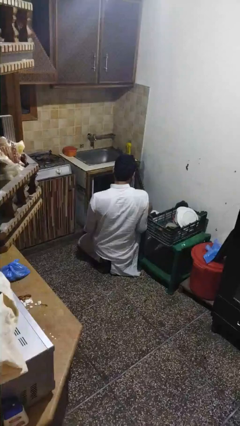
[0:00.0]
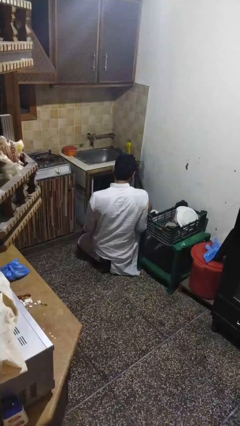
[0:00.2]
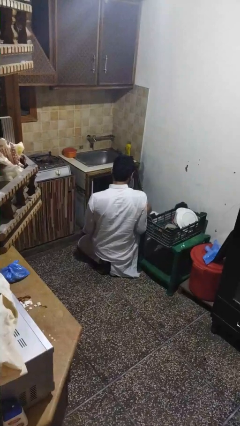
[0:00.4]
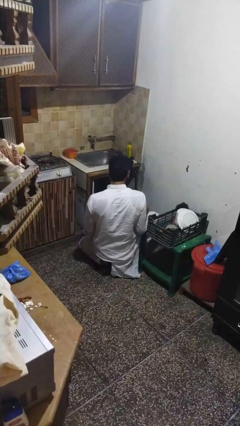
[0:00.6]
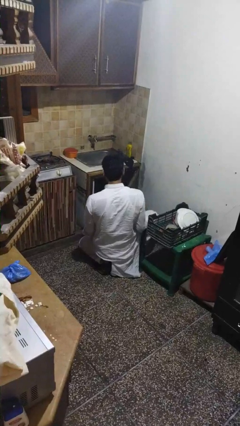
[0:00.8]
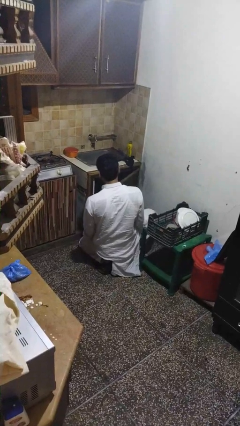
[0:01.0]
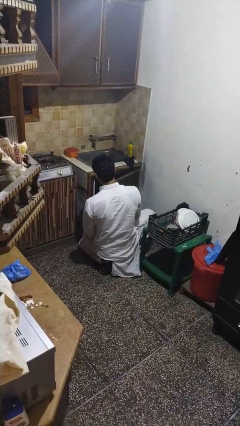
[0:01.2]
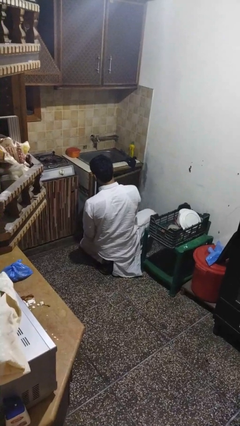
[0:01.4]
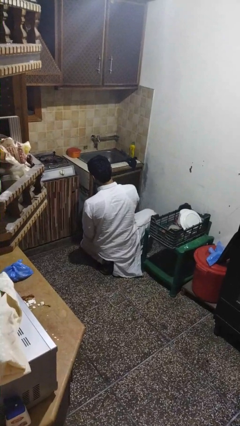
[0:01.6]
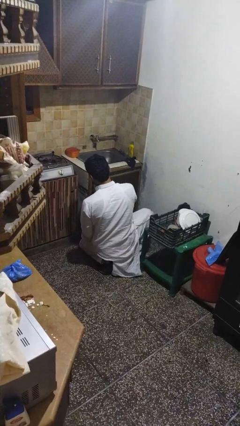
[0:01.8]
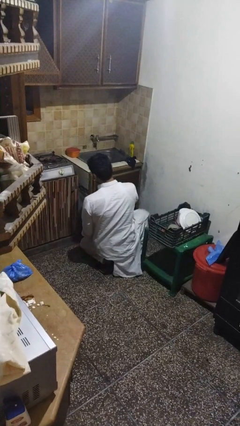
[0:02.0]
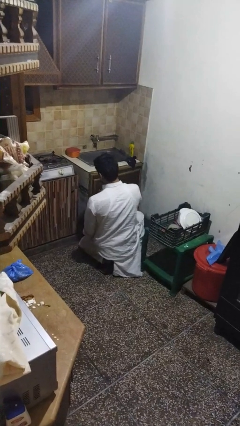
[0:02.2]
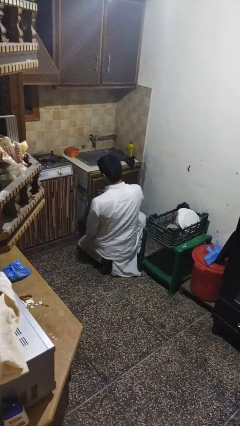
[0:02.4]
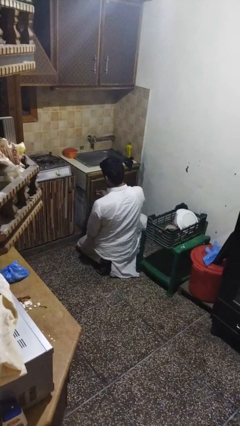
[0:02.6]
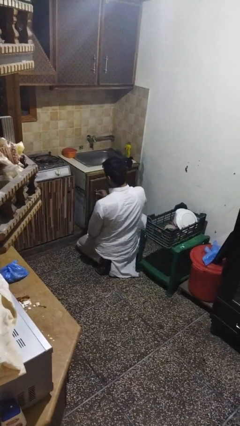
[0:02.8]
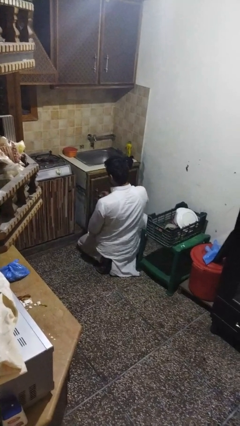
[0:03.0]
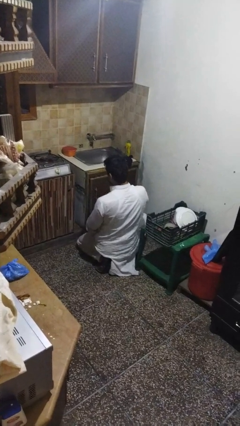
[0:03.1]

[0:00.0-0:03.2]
person closes cabinet

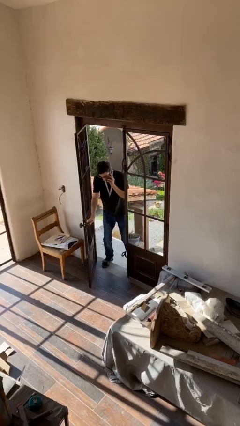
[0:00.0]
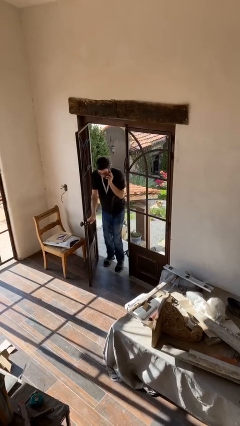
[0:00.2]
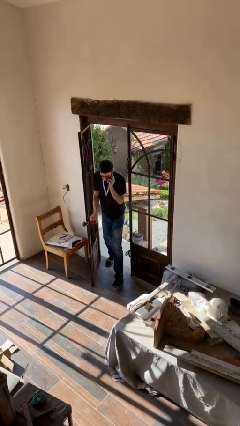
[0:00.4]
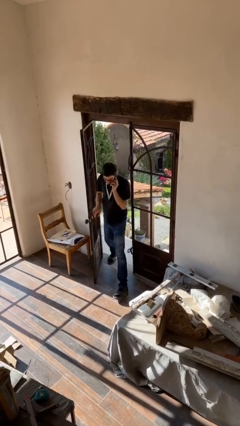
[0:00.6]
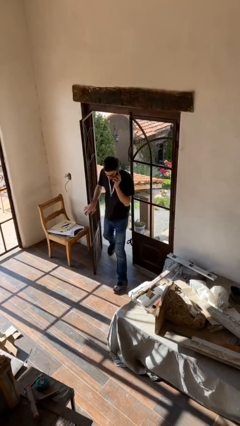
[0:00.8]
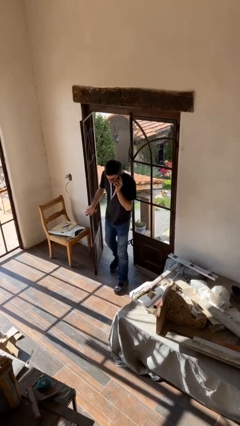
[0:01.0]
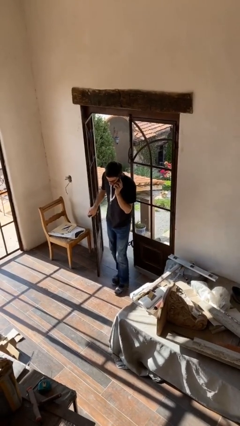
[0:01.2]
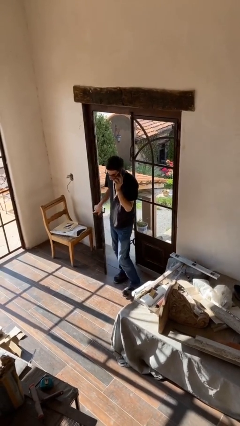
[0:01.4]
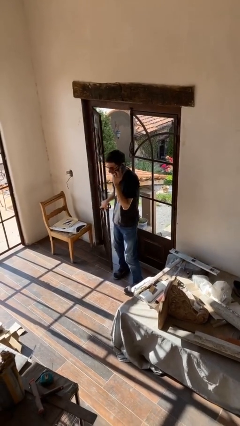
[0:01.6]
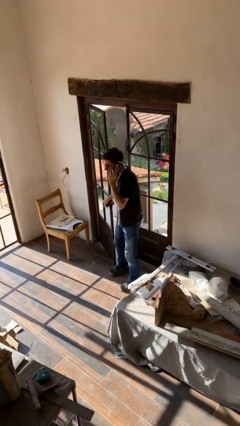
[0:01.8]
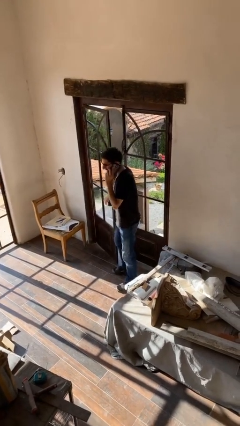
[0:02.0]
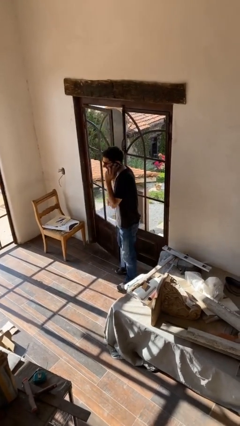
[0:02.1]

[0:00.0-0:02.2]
person enters scene through structure

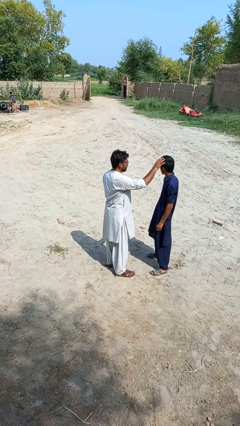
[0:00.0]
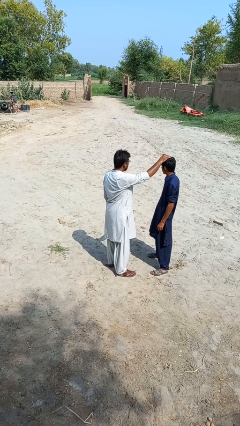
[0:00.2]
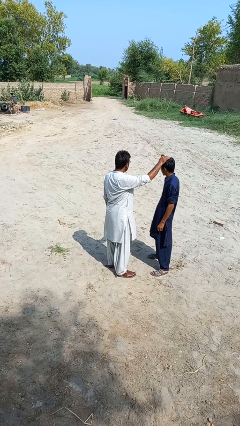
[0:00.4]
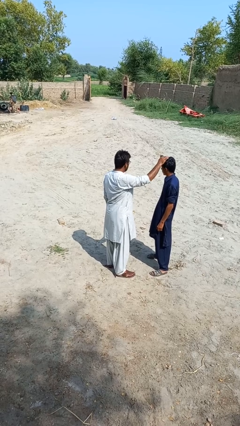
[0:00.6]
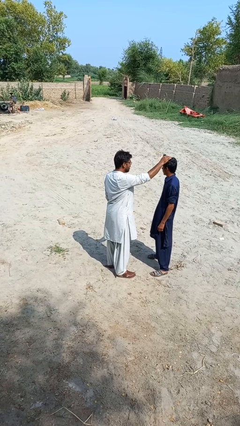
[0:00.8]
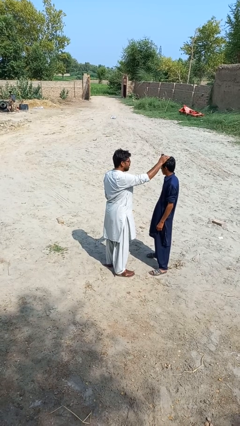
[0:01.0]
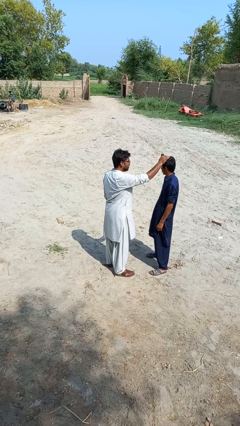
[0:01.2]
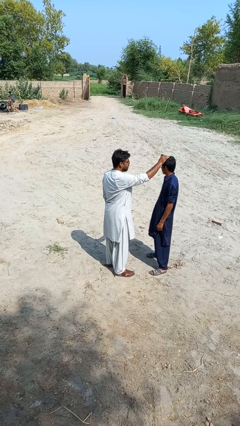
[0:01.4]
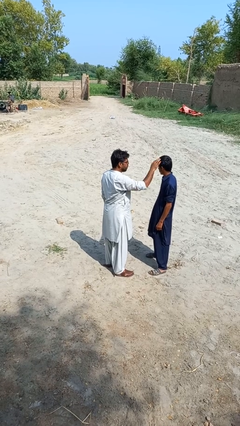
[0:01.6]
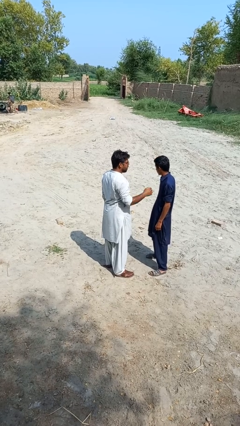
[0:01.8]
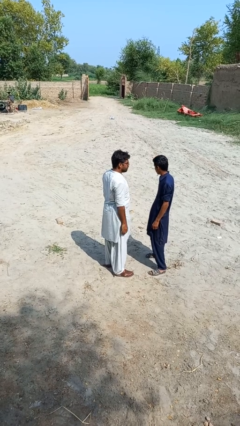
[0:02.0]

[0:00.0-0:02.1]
person grabs person by hair

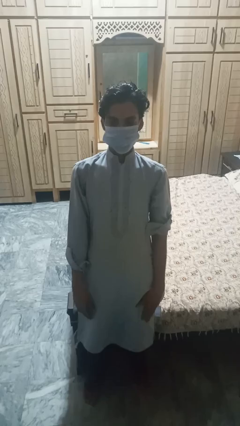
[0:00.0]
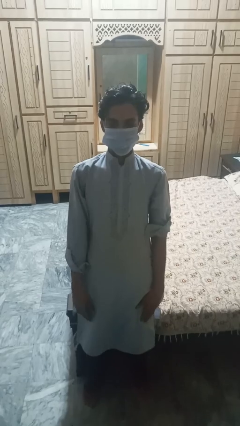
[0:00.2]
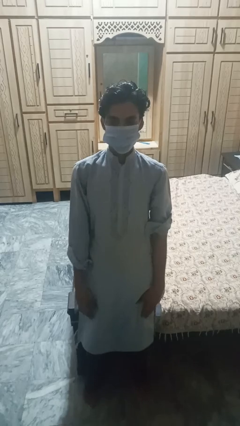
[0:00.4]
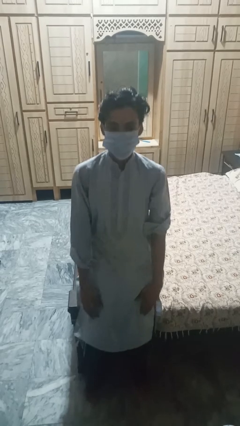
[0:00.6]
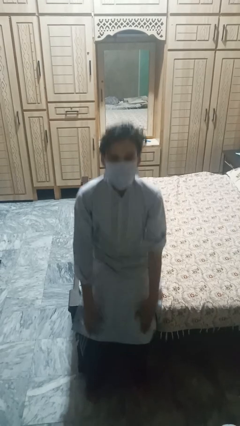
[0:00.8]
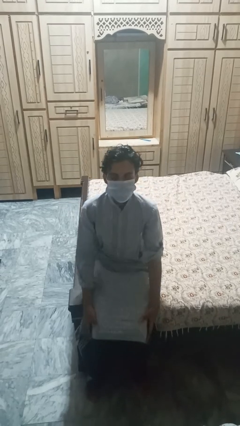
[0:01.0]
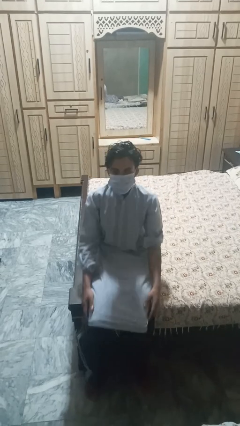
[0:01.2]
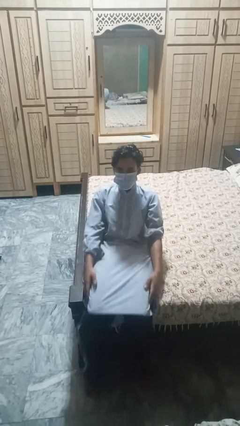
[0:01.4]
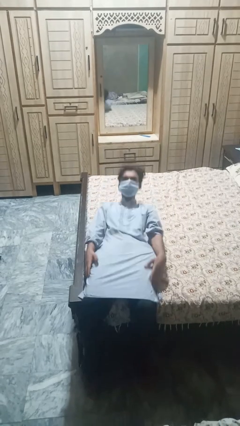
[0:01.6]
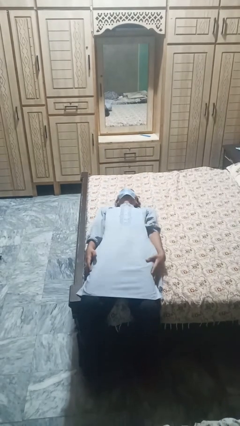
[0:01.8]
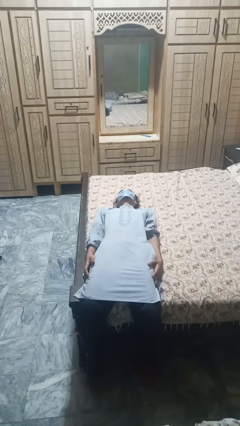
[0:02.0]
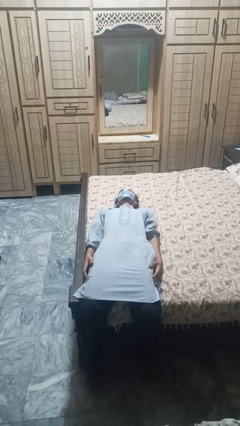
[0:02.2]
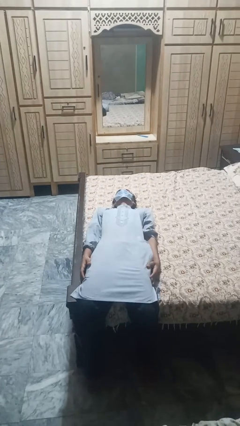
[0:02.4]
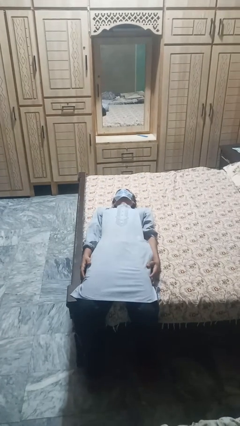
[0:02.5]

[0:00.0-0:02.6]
person lies down on bed

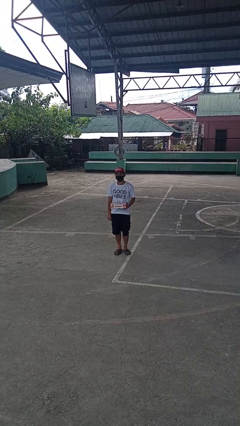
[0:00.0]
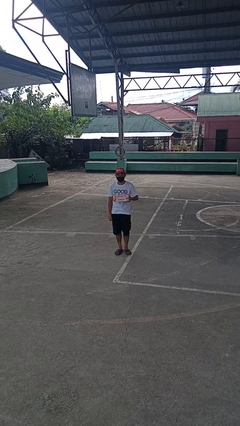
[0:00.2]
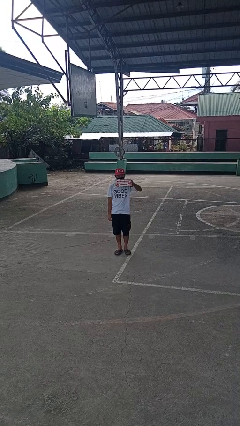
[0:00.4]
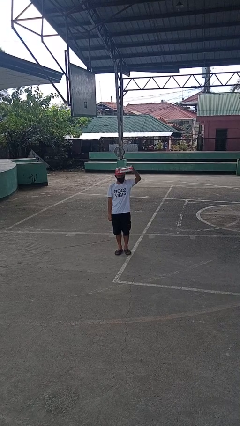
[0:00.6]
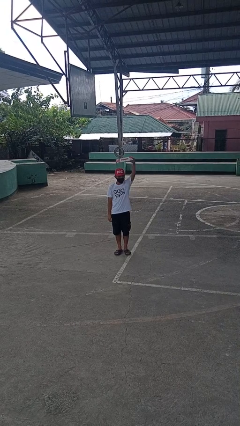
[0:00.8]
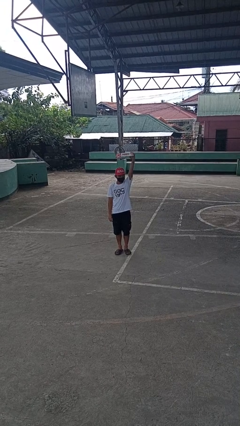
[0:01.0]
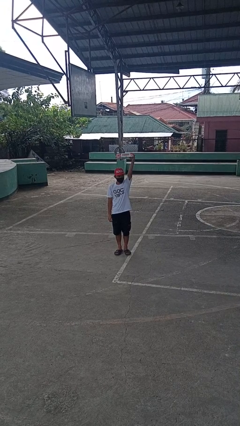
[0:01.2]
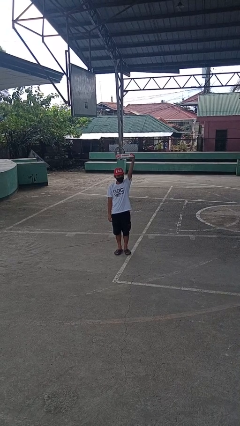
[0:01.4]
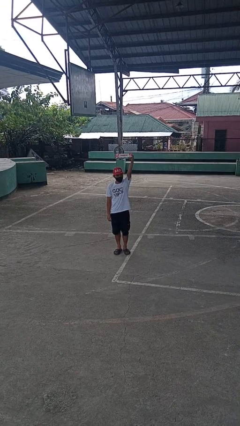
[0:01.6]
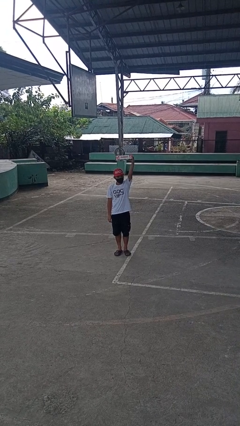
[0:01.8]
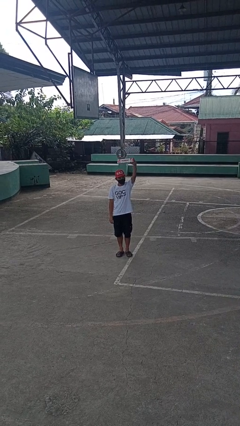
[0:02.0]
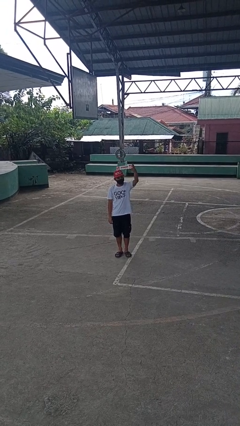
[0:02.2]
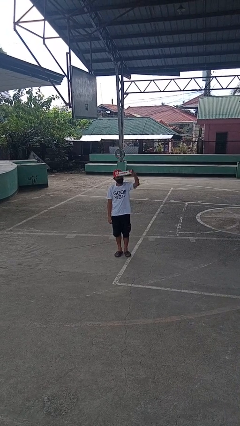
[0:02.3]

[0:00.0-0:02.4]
person holds object above head

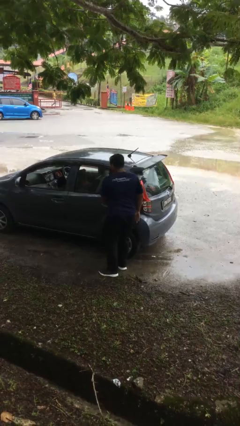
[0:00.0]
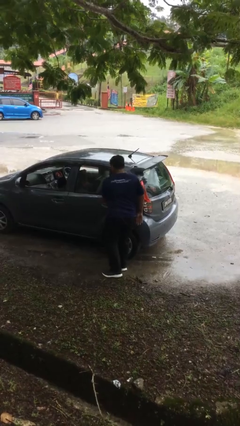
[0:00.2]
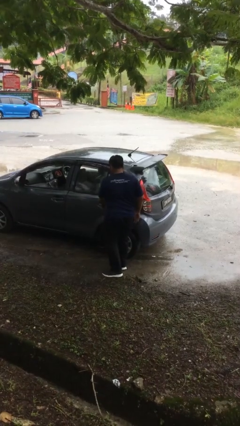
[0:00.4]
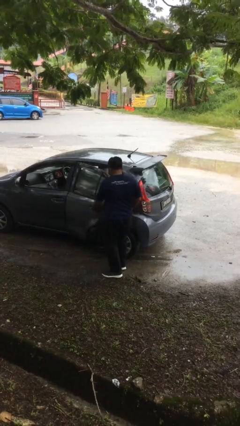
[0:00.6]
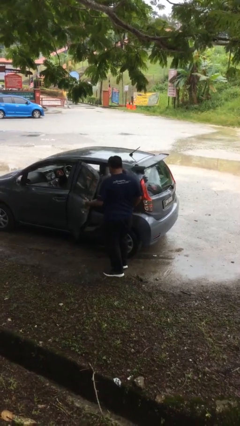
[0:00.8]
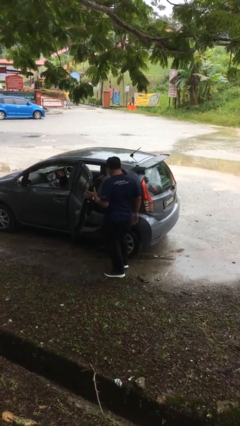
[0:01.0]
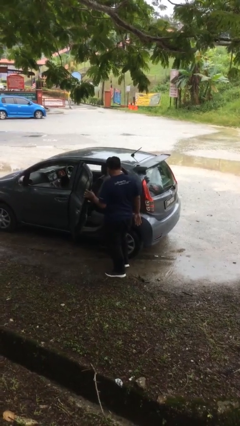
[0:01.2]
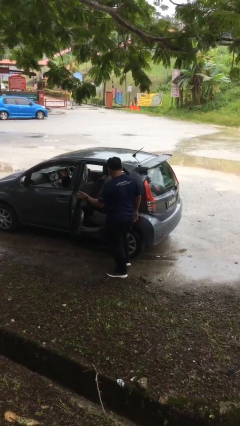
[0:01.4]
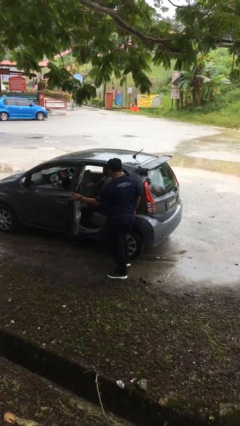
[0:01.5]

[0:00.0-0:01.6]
person opens car door

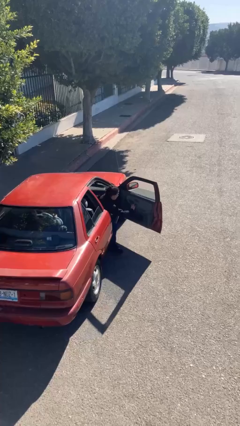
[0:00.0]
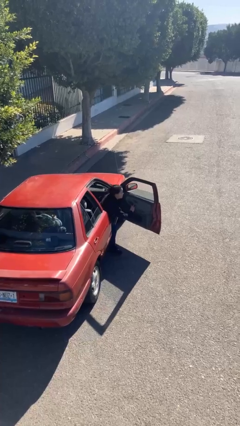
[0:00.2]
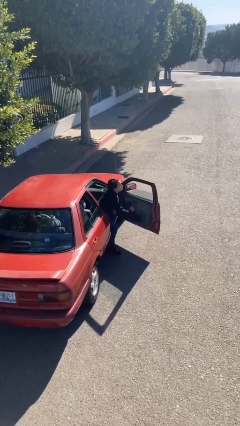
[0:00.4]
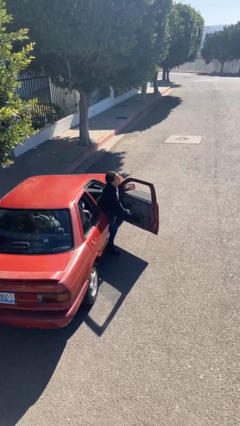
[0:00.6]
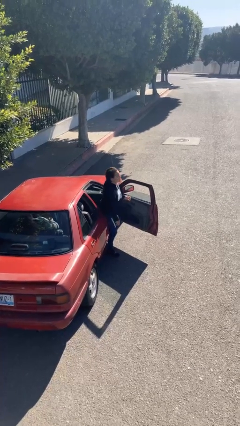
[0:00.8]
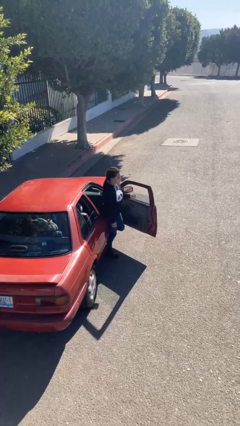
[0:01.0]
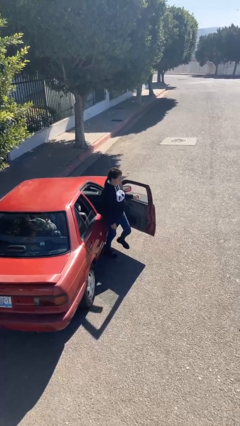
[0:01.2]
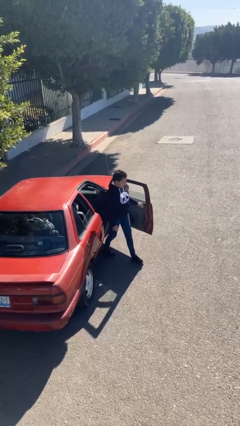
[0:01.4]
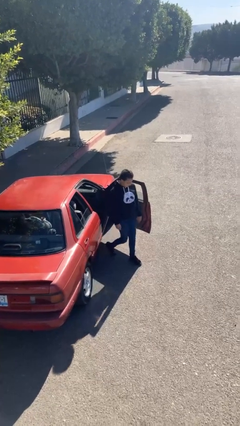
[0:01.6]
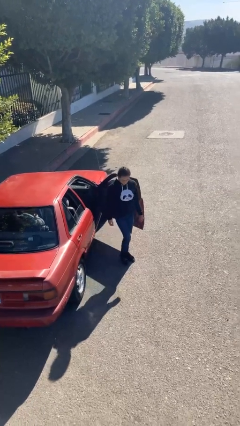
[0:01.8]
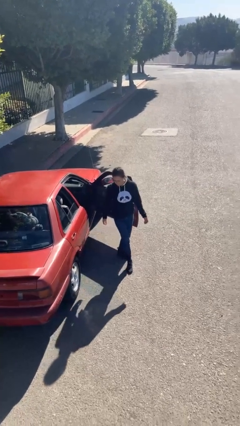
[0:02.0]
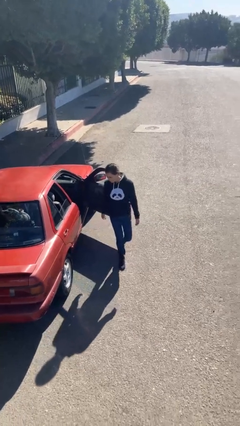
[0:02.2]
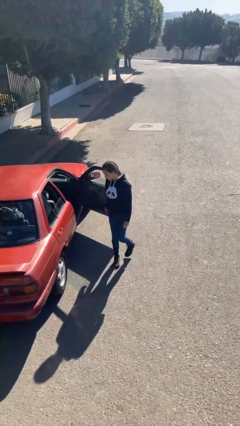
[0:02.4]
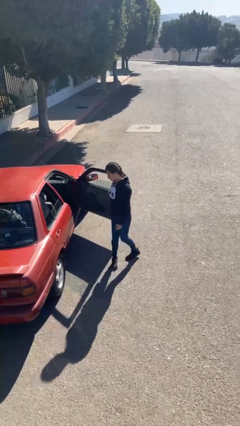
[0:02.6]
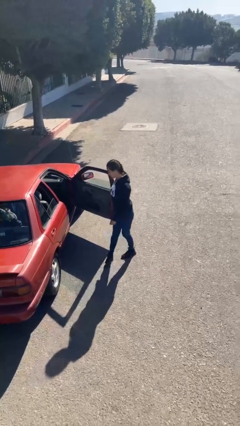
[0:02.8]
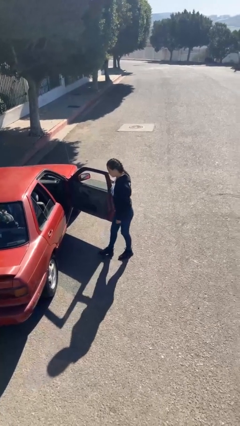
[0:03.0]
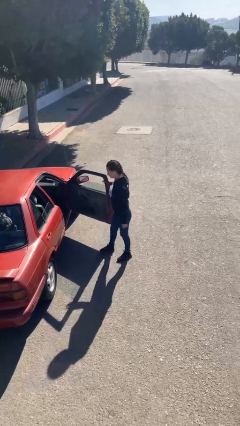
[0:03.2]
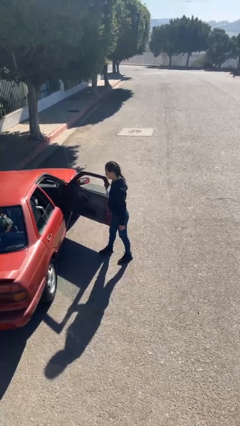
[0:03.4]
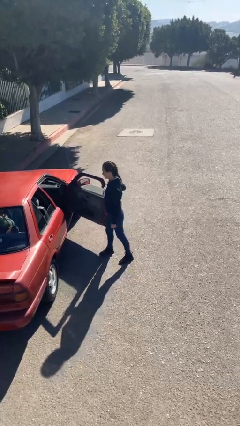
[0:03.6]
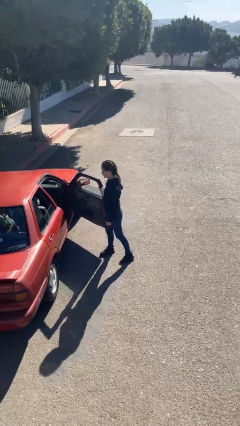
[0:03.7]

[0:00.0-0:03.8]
person exits car
